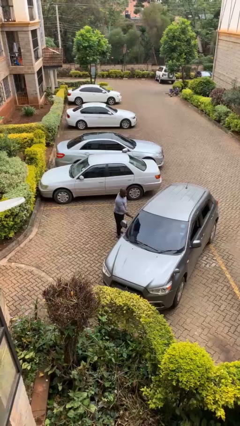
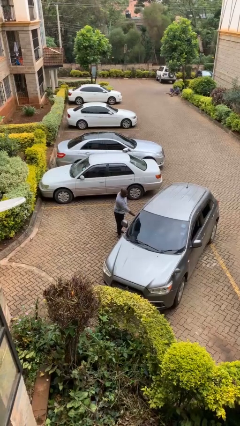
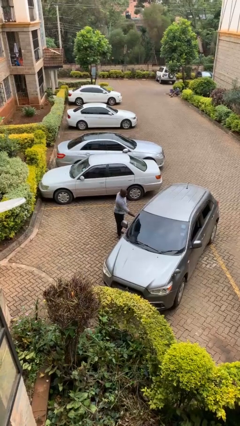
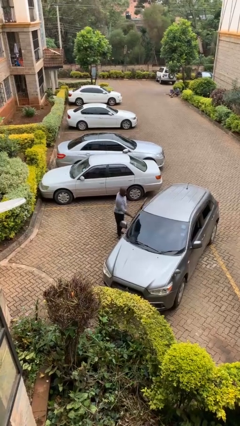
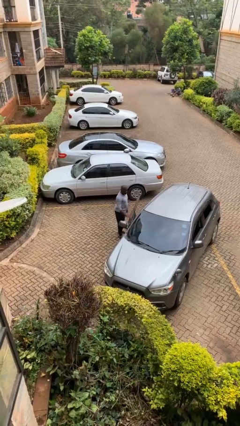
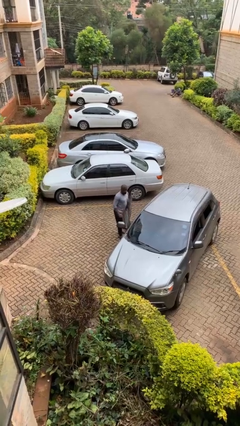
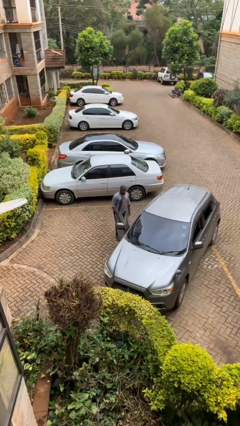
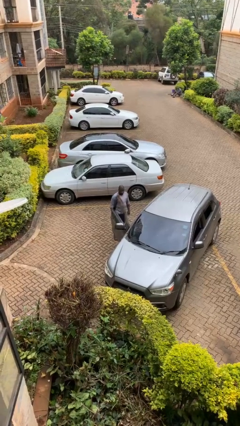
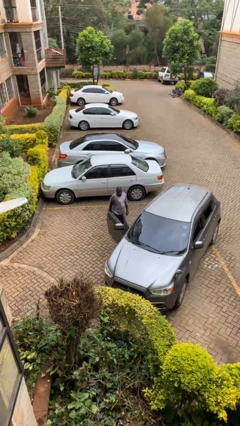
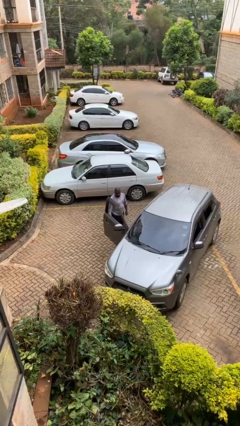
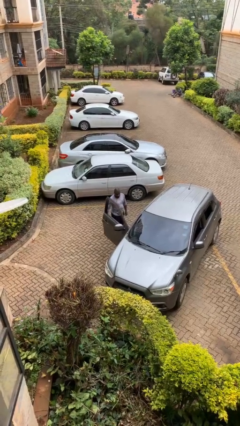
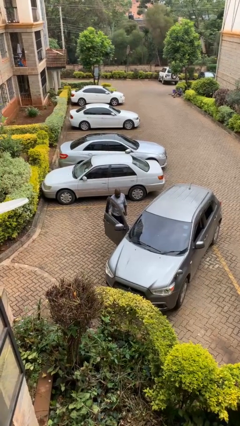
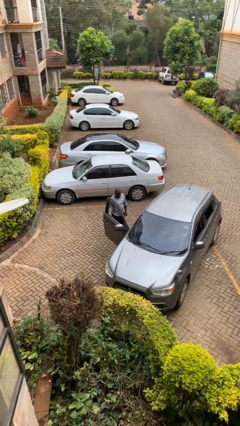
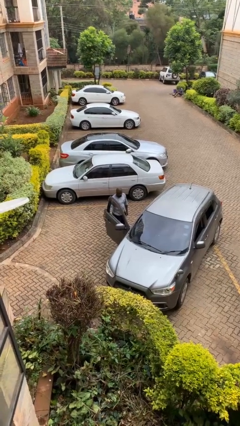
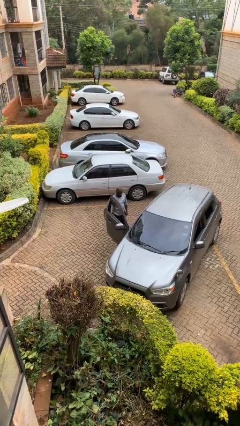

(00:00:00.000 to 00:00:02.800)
person opens car door

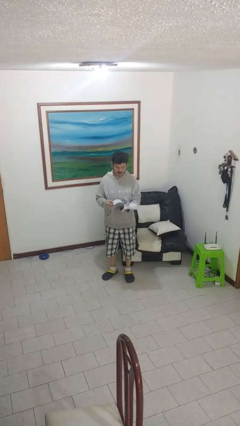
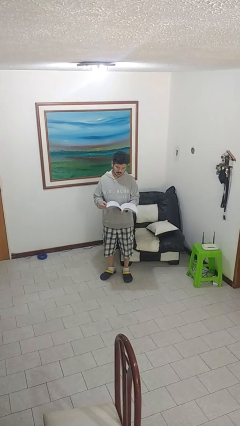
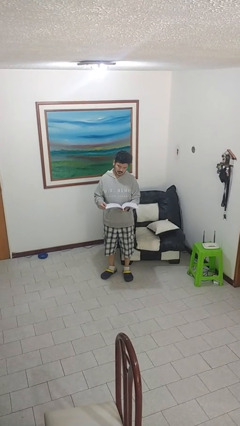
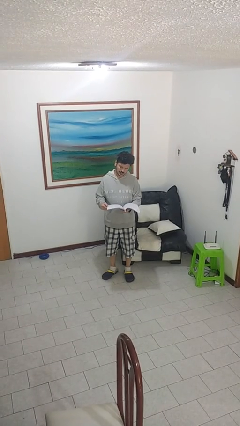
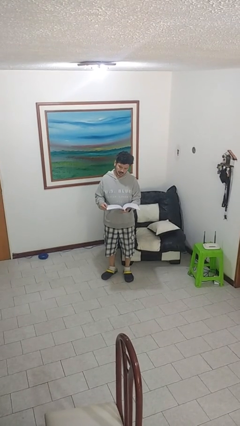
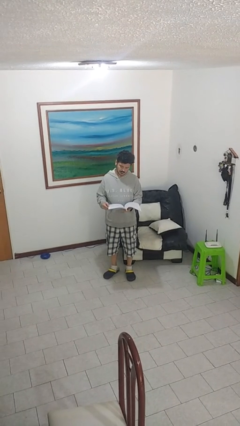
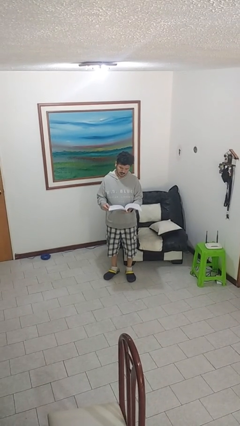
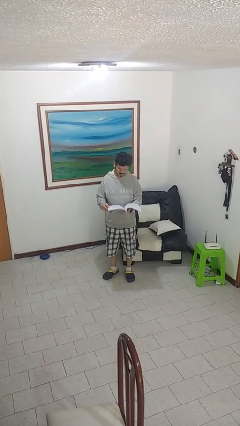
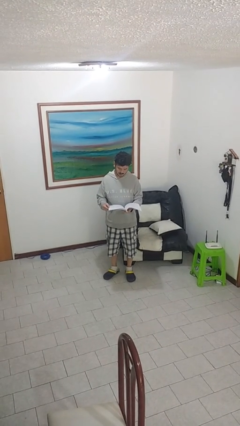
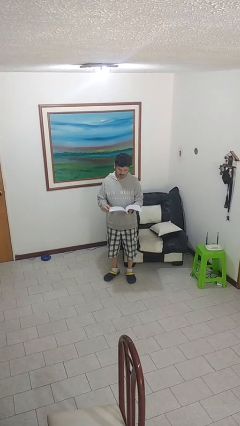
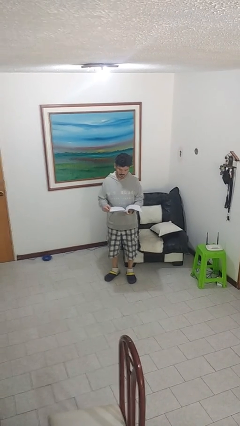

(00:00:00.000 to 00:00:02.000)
person reads magazine

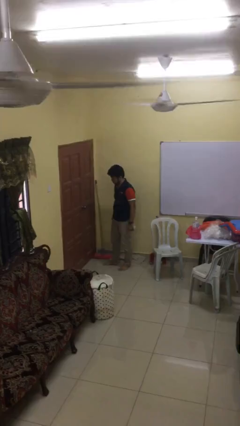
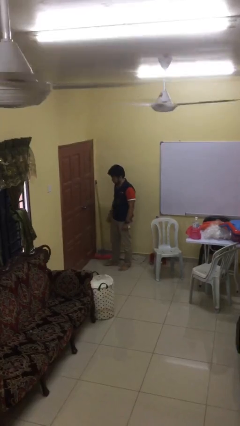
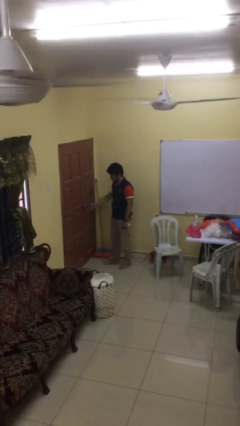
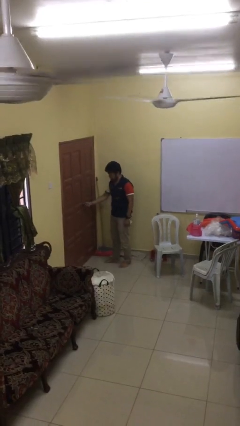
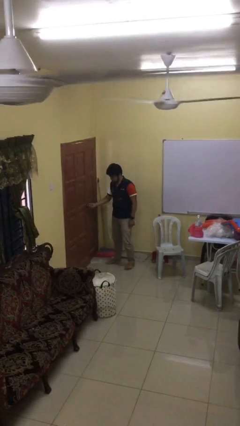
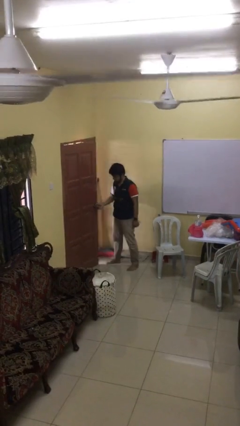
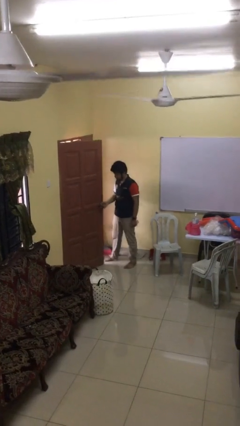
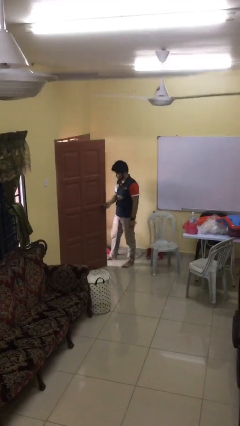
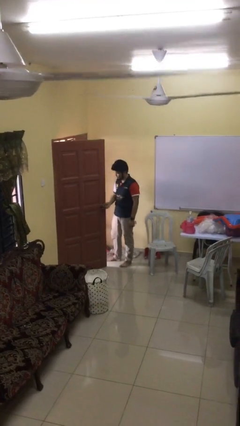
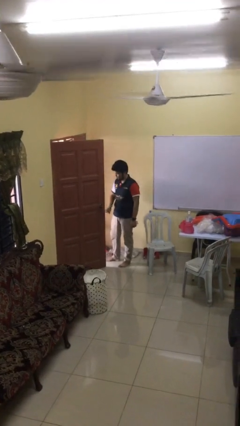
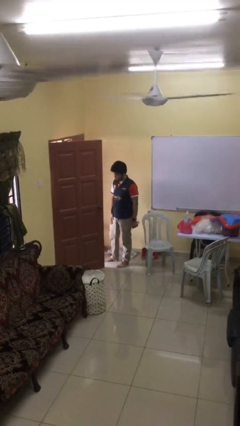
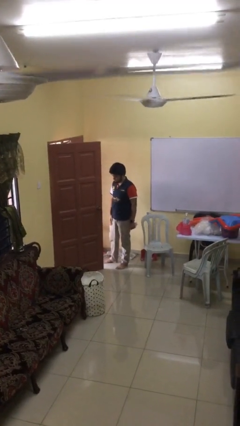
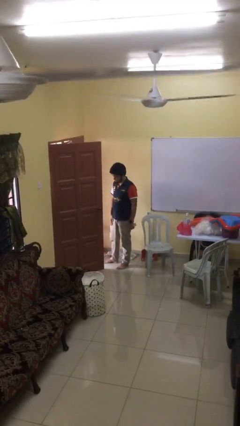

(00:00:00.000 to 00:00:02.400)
person opens facility door

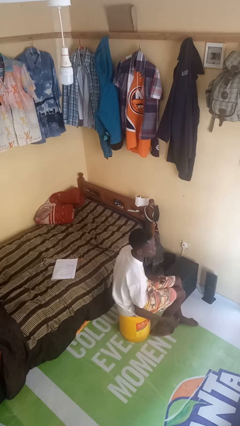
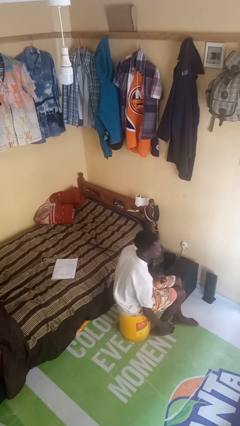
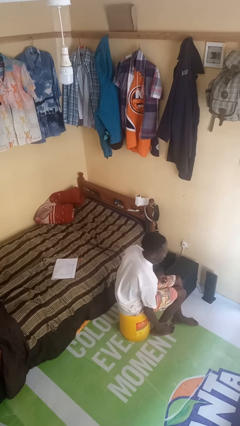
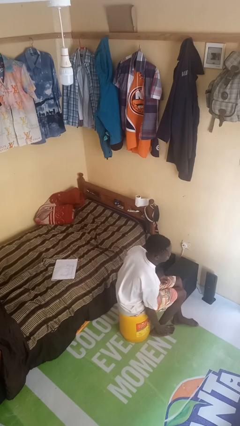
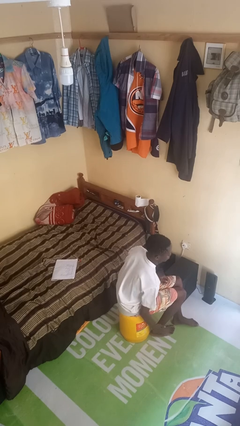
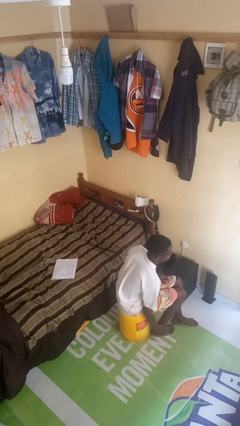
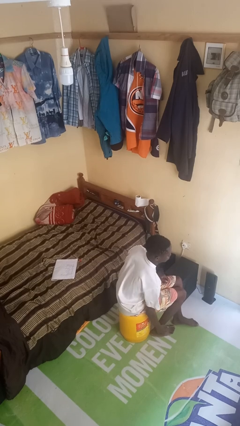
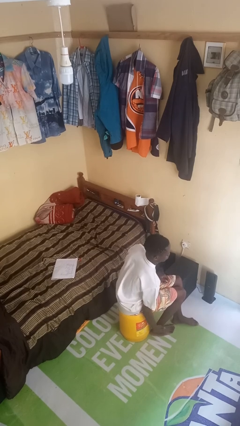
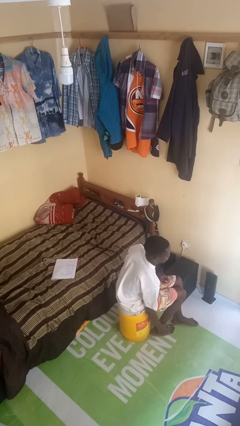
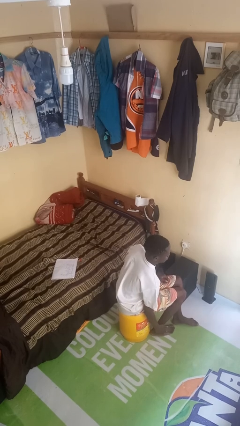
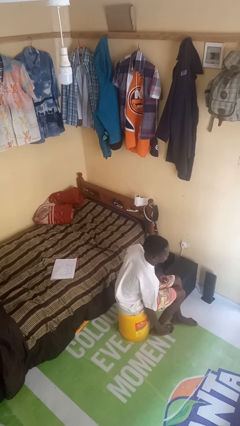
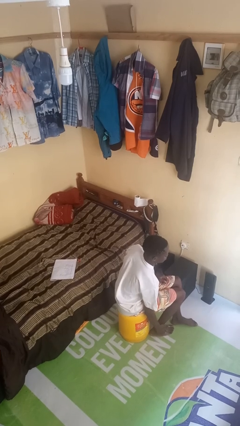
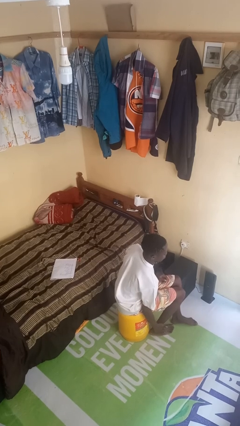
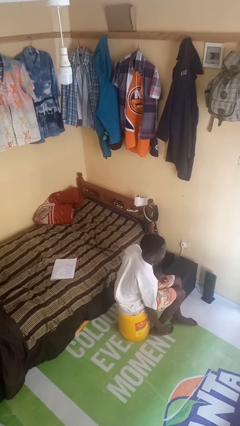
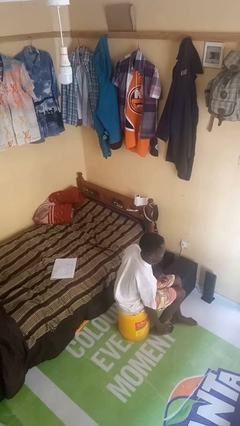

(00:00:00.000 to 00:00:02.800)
person rubs foot

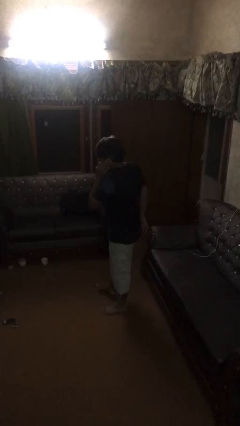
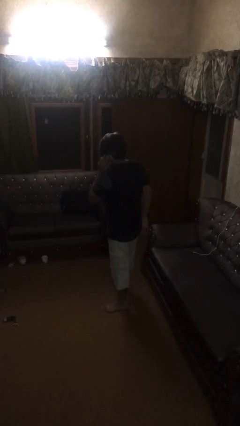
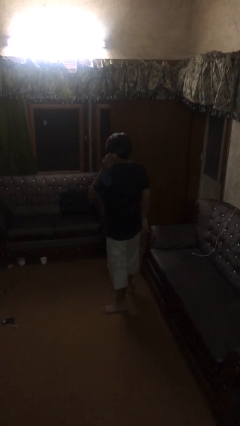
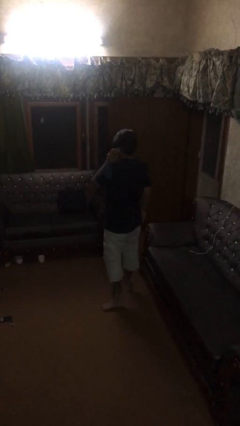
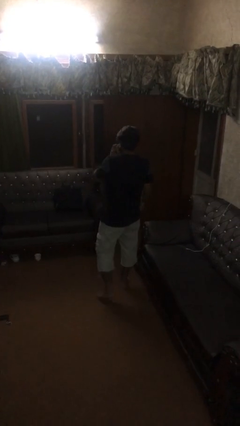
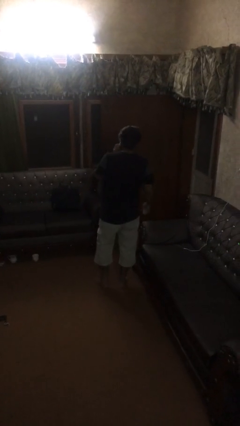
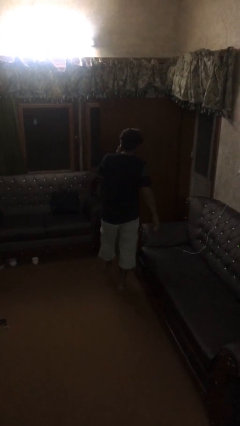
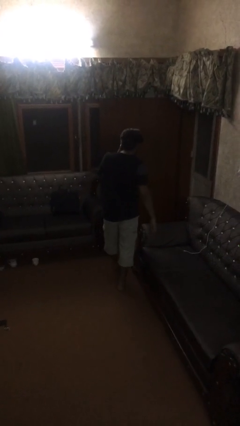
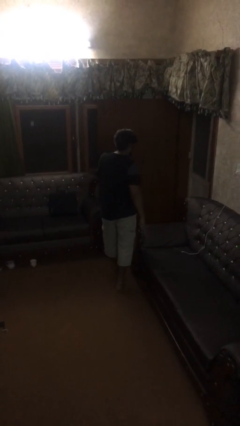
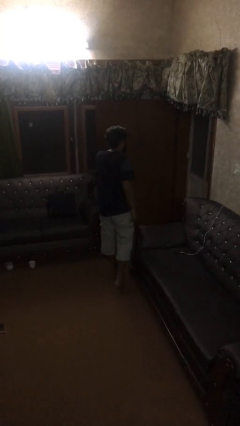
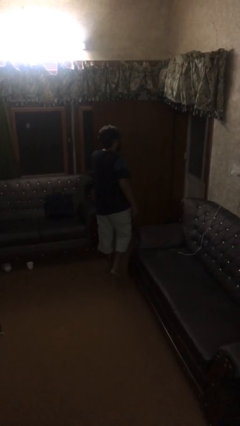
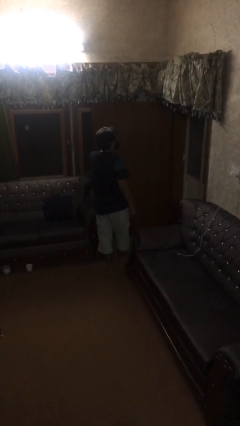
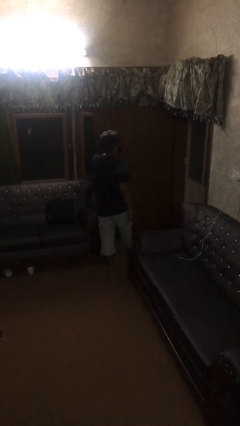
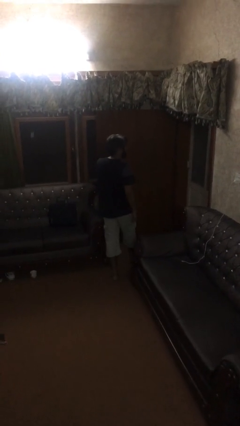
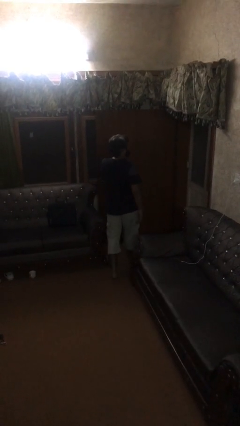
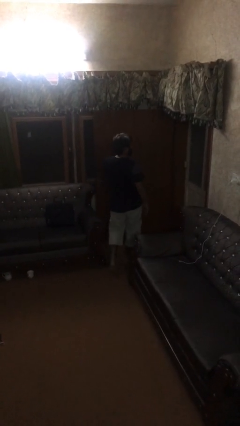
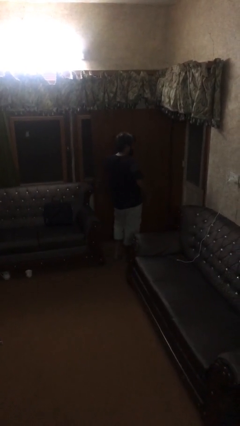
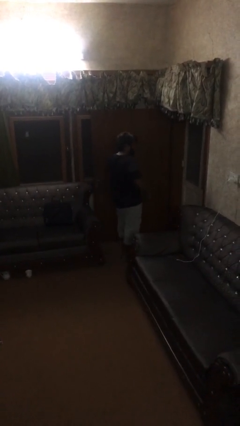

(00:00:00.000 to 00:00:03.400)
person talks on phone

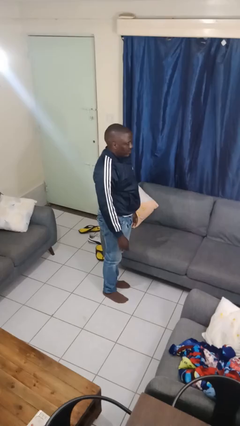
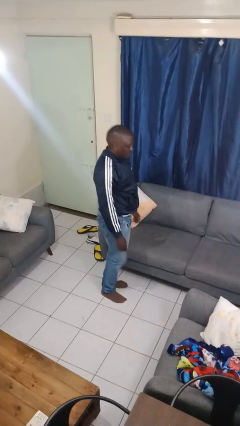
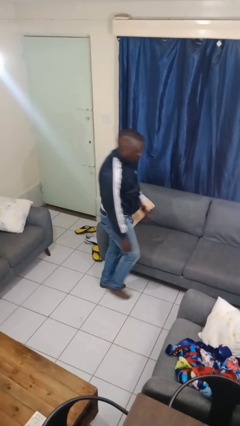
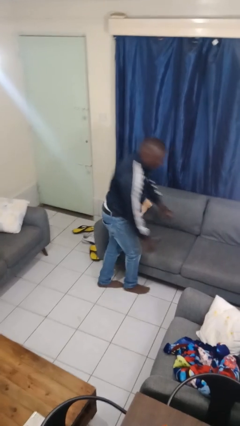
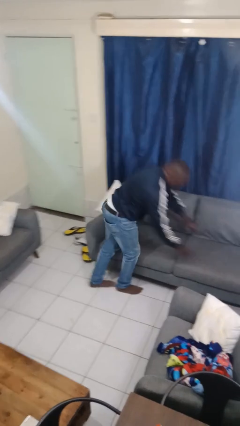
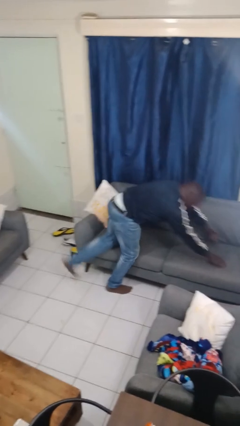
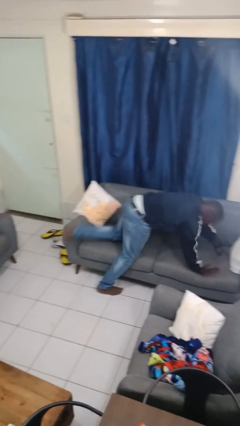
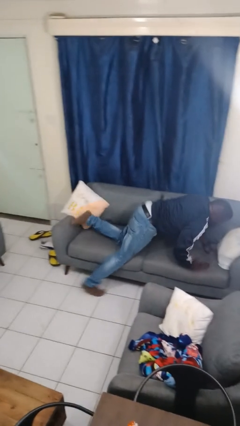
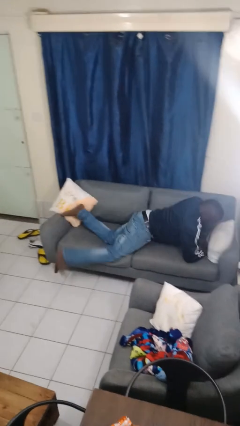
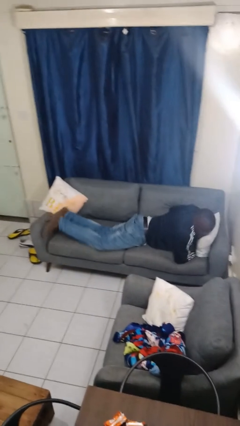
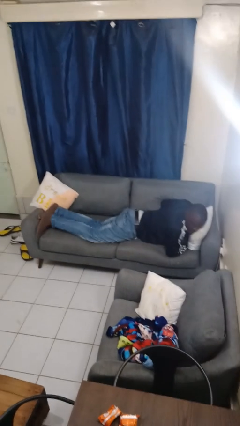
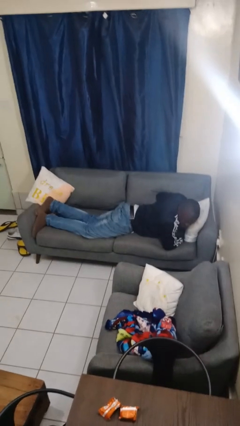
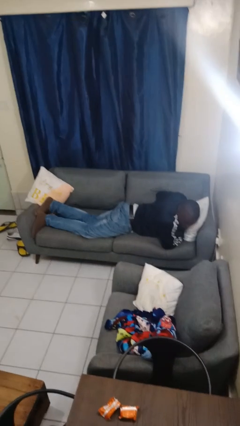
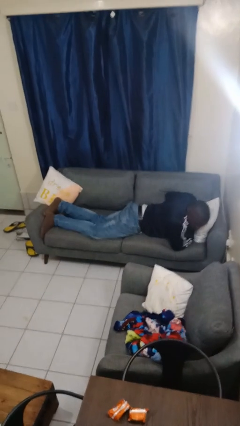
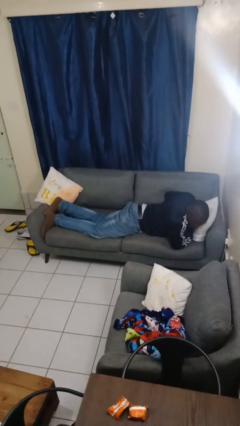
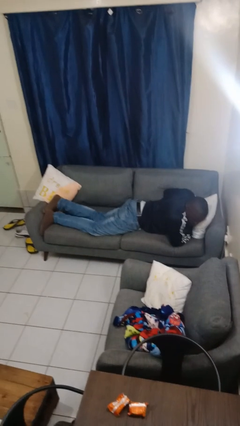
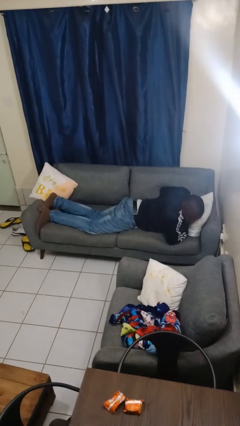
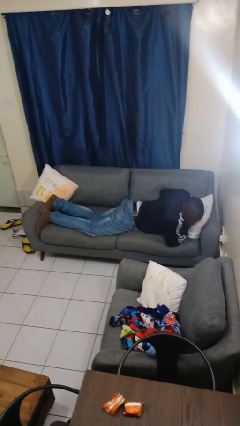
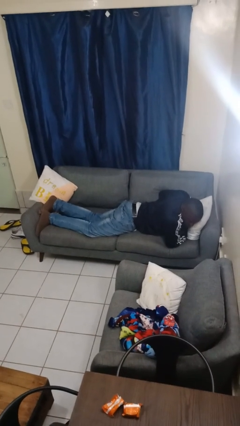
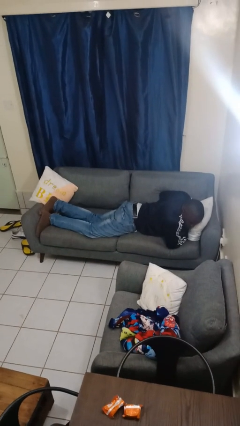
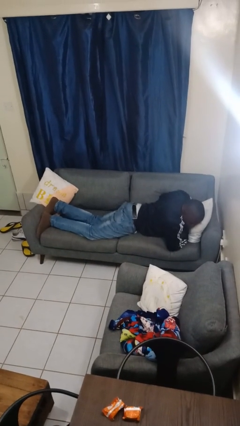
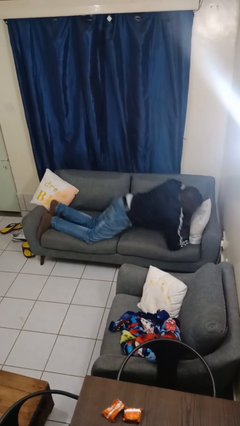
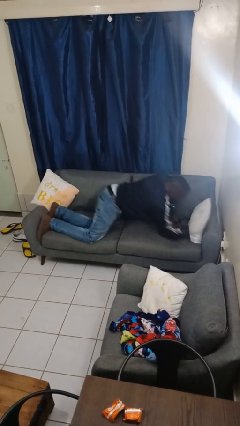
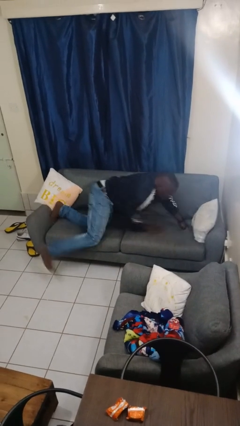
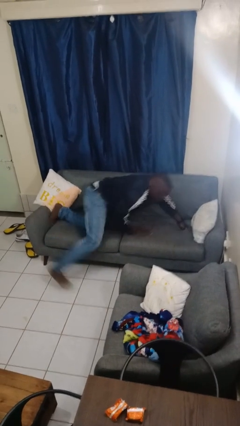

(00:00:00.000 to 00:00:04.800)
person lies down on couch
